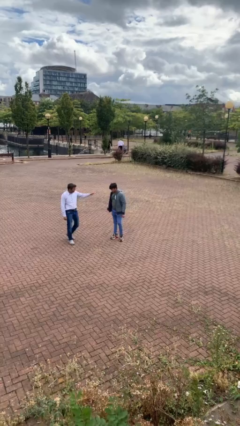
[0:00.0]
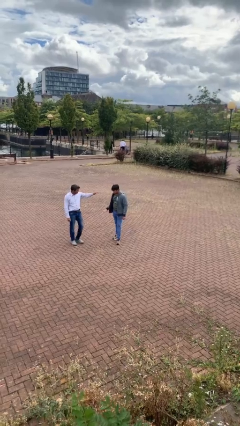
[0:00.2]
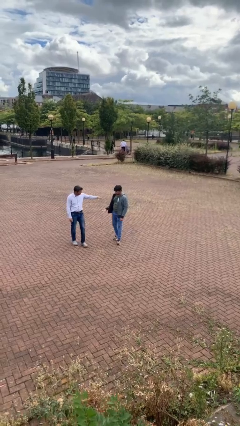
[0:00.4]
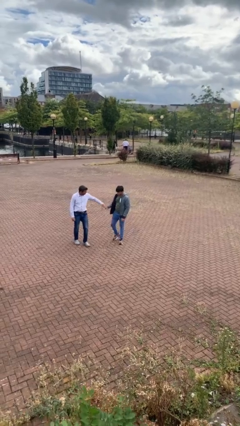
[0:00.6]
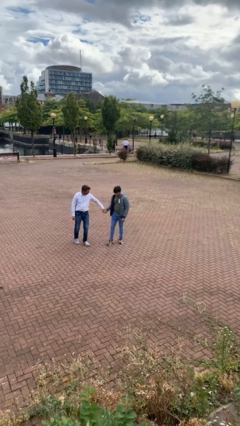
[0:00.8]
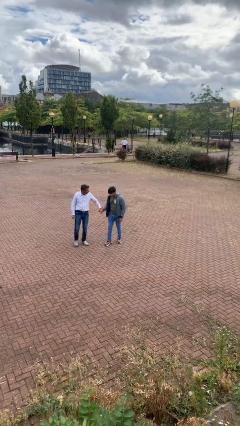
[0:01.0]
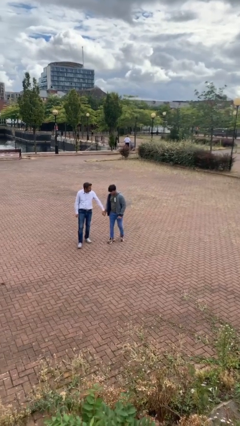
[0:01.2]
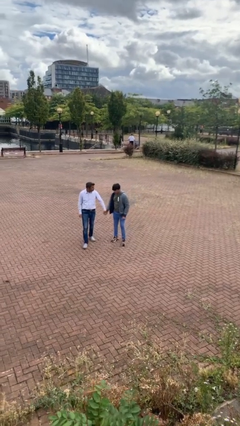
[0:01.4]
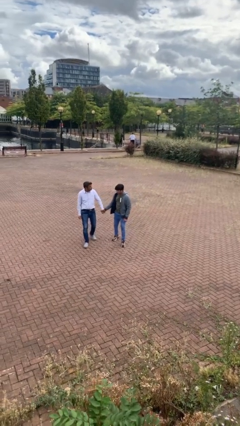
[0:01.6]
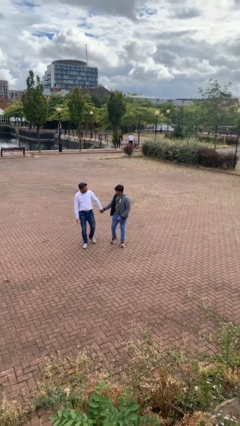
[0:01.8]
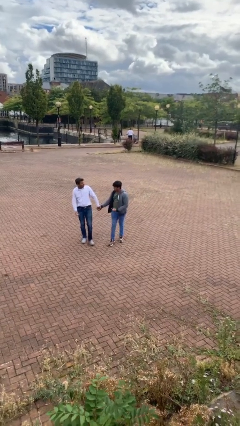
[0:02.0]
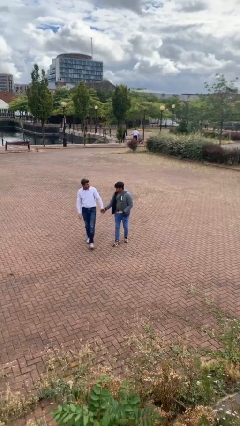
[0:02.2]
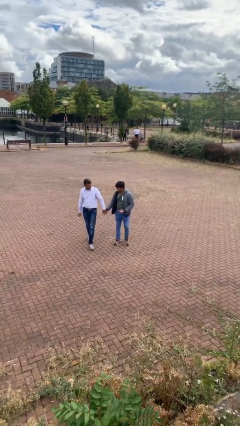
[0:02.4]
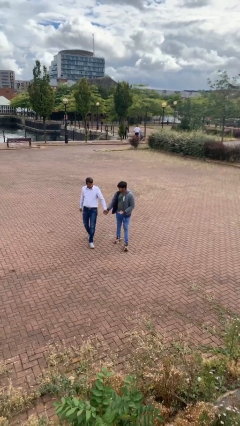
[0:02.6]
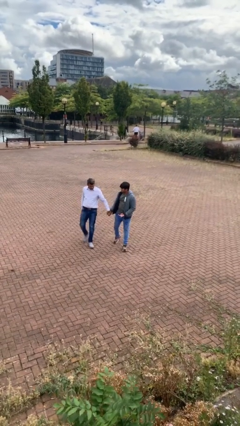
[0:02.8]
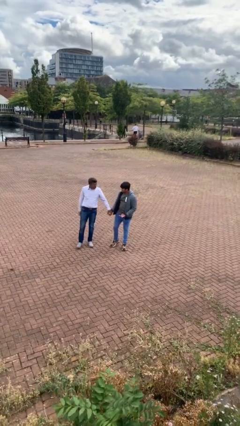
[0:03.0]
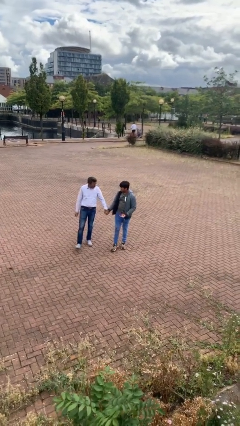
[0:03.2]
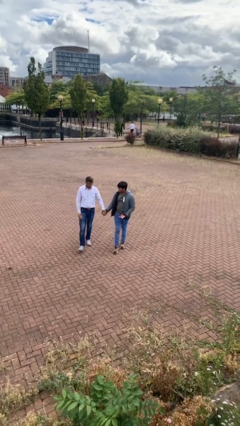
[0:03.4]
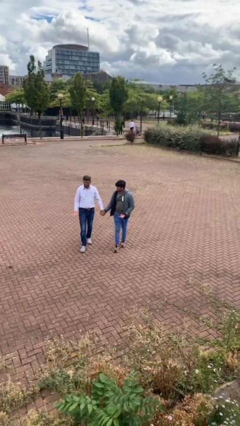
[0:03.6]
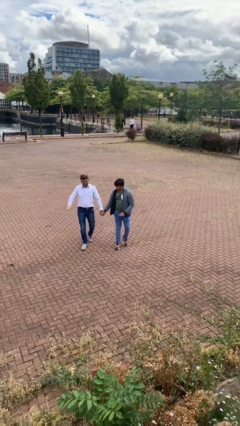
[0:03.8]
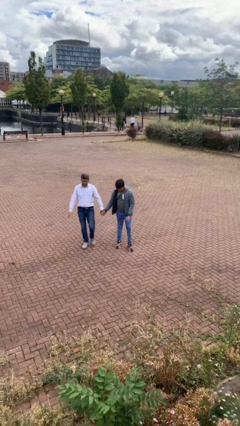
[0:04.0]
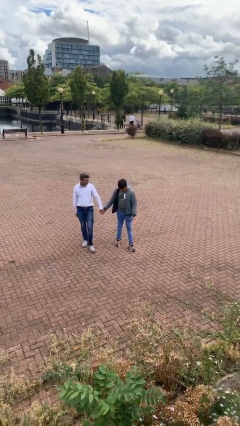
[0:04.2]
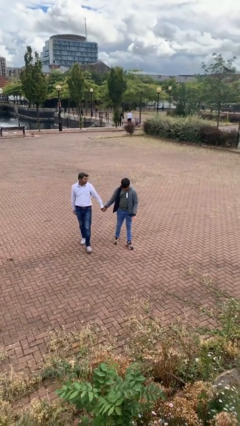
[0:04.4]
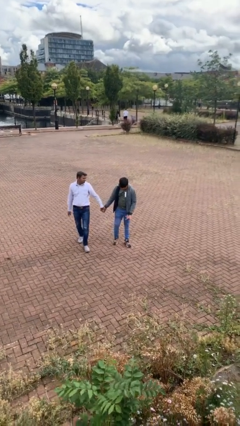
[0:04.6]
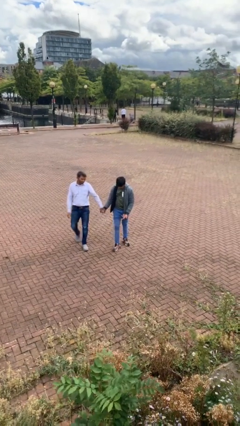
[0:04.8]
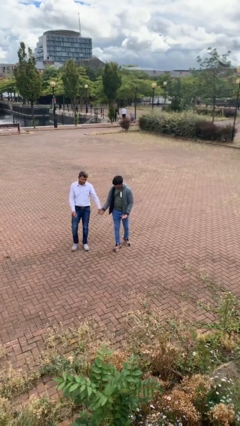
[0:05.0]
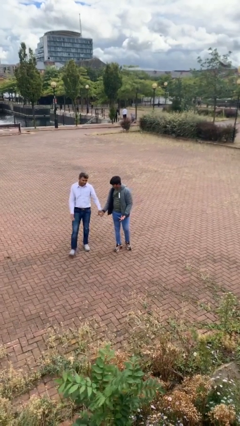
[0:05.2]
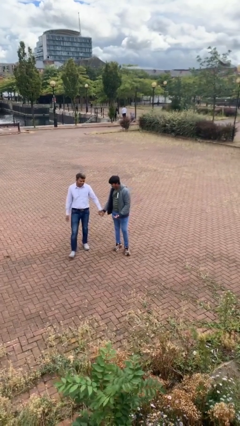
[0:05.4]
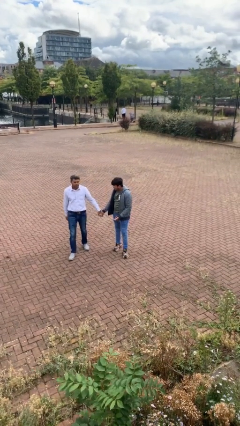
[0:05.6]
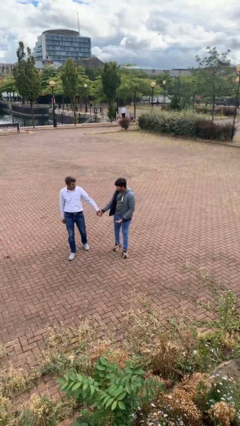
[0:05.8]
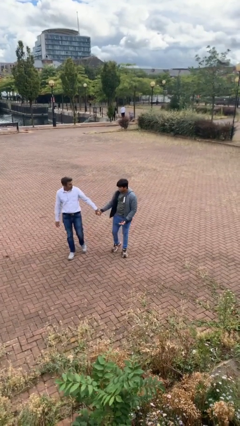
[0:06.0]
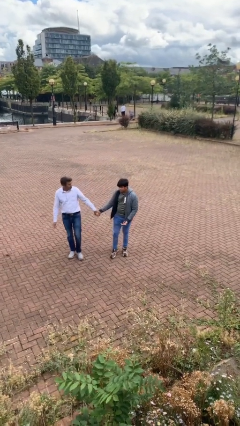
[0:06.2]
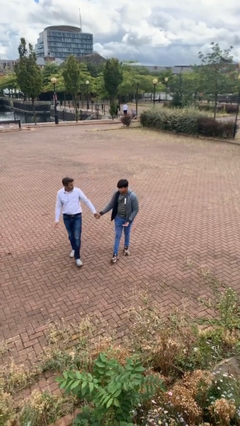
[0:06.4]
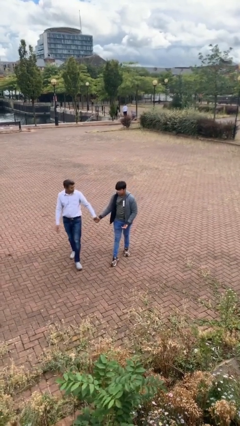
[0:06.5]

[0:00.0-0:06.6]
person holds hand

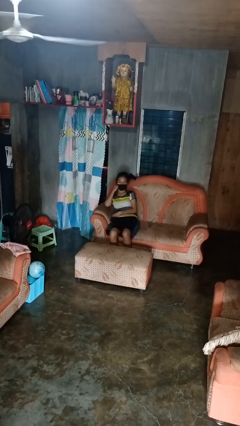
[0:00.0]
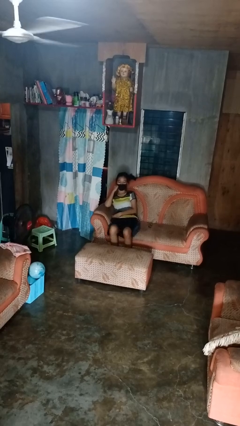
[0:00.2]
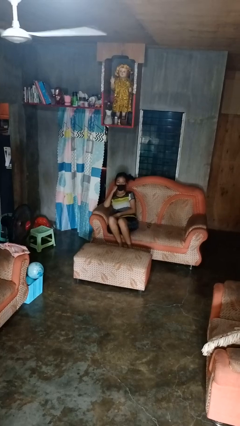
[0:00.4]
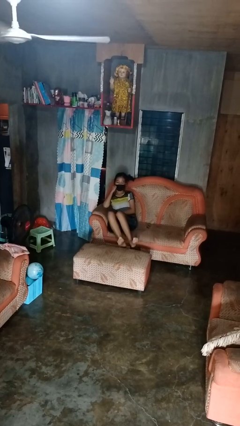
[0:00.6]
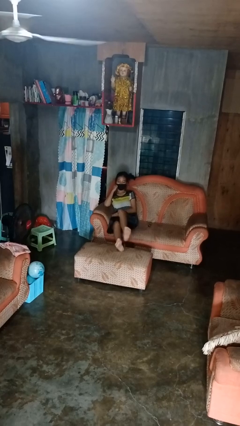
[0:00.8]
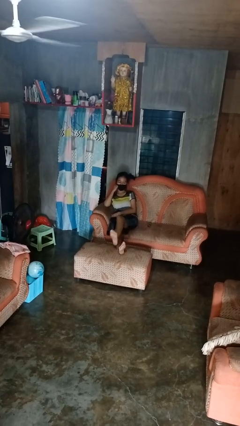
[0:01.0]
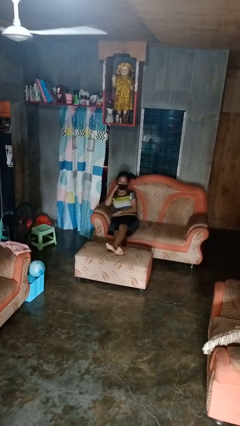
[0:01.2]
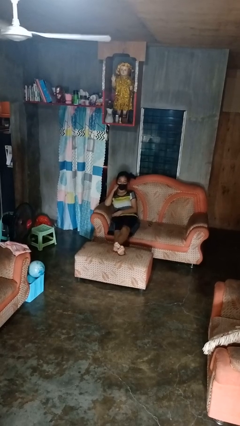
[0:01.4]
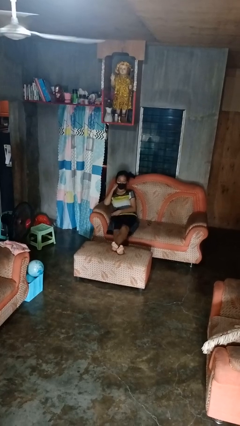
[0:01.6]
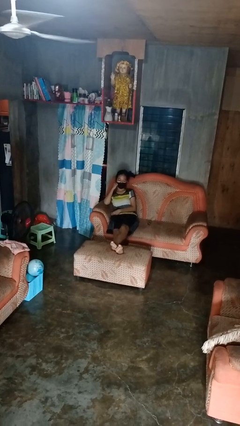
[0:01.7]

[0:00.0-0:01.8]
person puts feet up

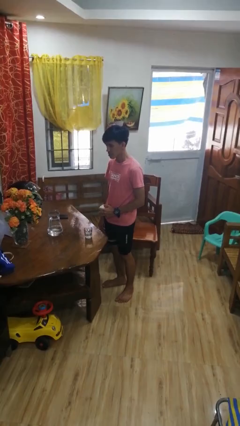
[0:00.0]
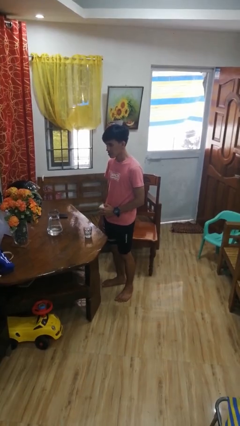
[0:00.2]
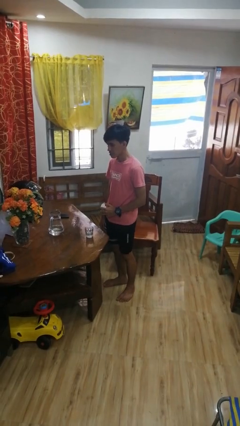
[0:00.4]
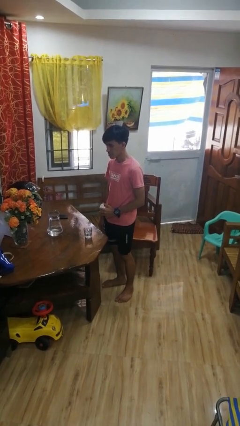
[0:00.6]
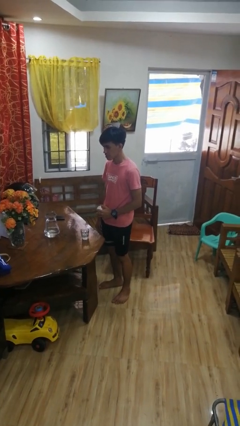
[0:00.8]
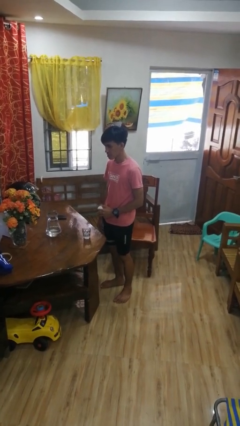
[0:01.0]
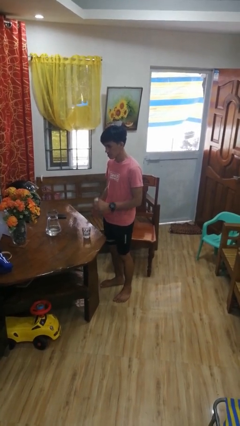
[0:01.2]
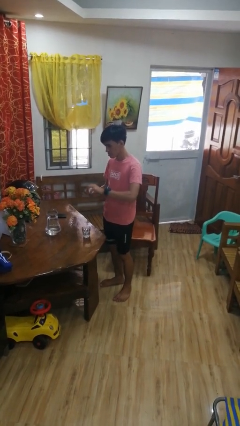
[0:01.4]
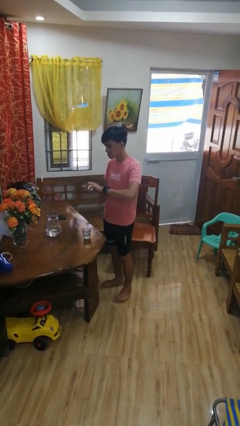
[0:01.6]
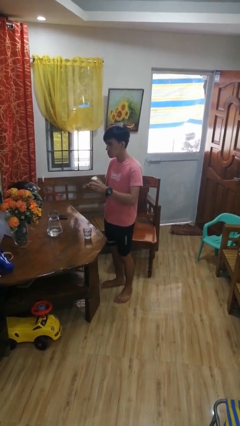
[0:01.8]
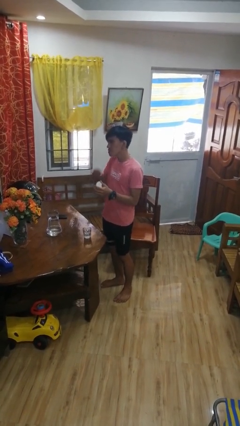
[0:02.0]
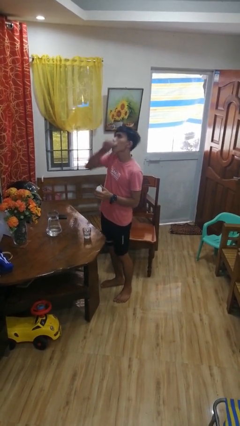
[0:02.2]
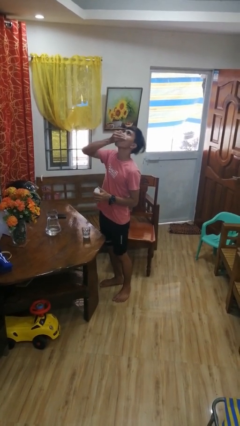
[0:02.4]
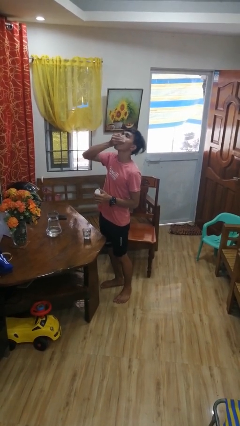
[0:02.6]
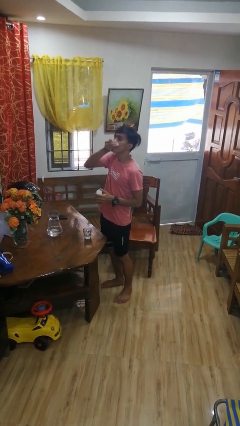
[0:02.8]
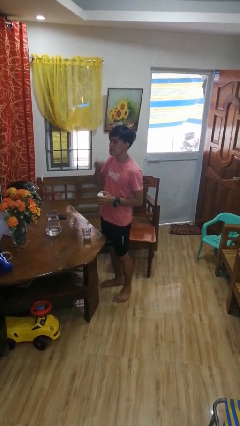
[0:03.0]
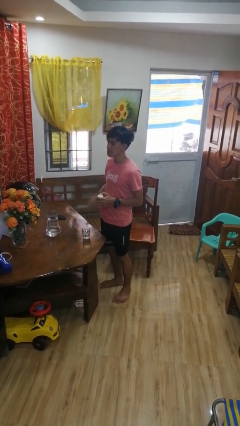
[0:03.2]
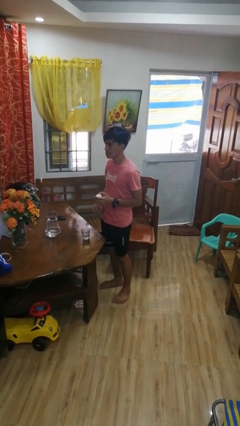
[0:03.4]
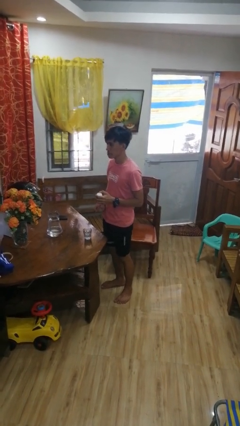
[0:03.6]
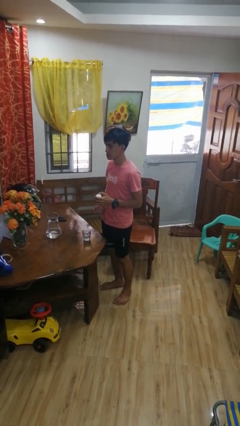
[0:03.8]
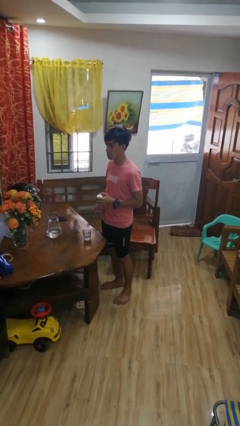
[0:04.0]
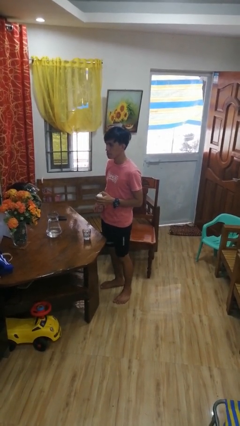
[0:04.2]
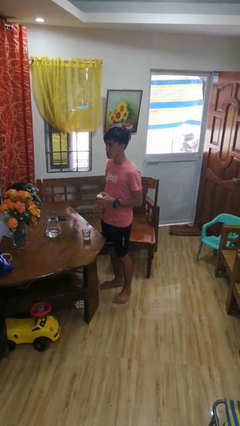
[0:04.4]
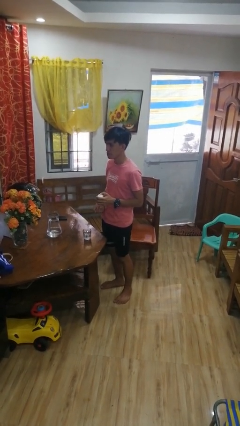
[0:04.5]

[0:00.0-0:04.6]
person takes medicine pills

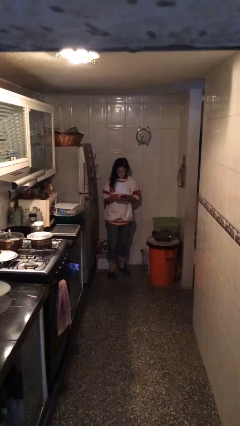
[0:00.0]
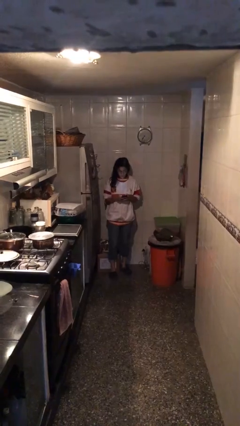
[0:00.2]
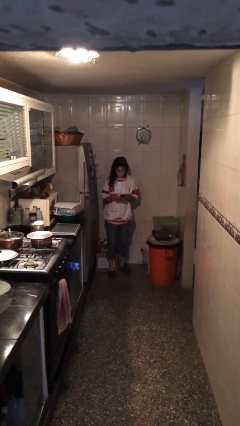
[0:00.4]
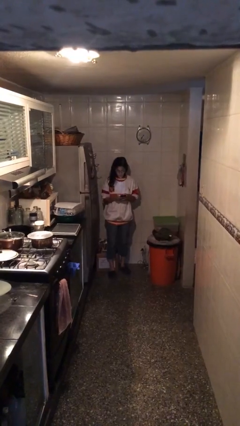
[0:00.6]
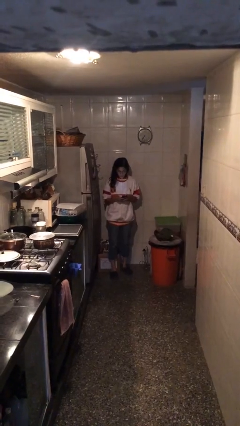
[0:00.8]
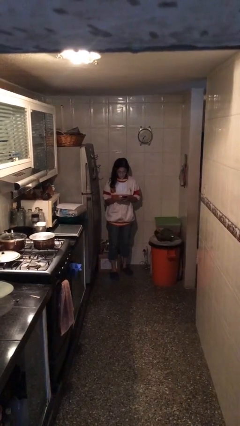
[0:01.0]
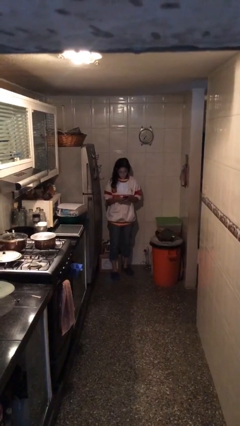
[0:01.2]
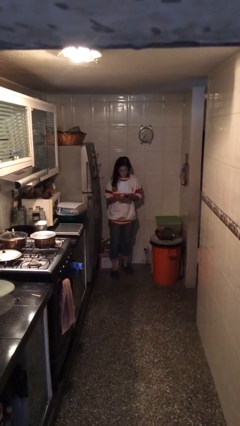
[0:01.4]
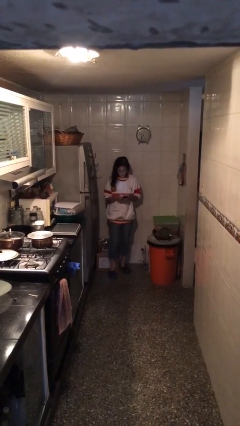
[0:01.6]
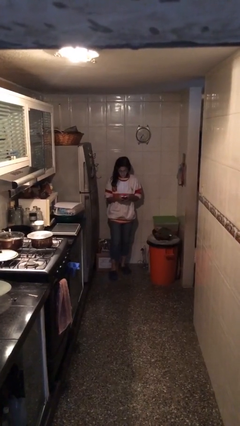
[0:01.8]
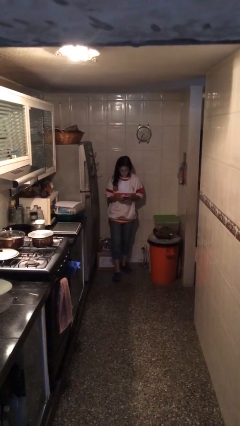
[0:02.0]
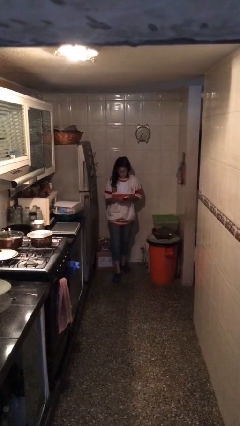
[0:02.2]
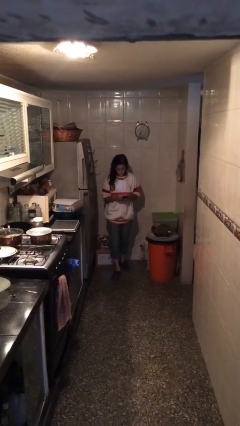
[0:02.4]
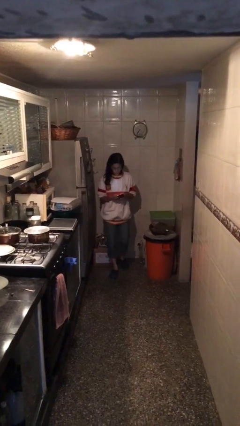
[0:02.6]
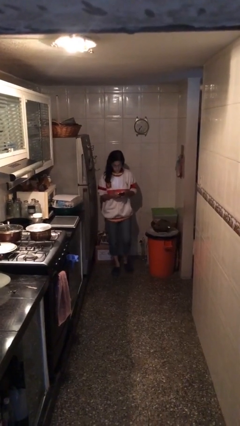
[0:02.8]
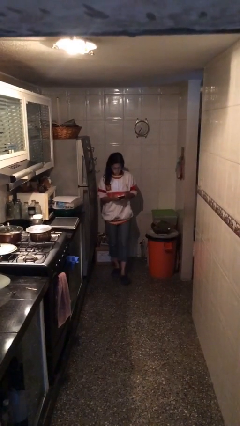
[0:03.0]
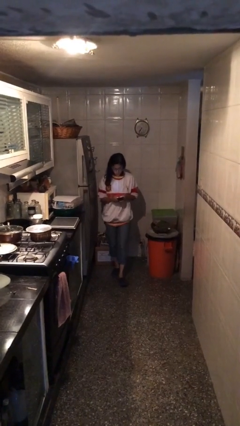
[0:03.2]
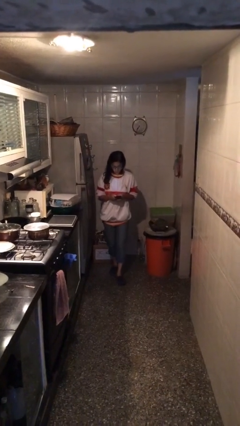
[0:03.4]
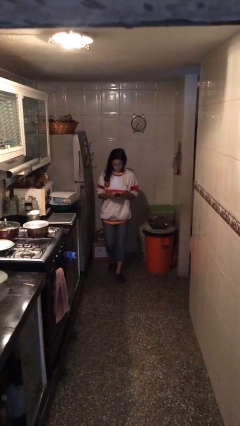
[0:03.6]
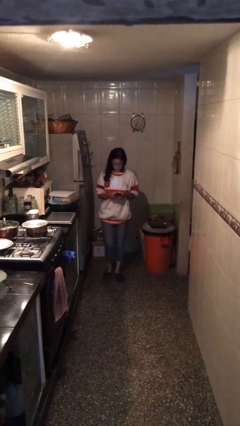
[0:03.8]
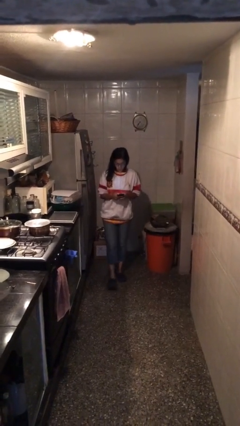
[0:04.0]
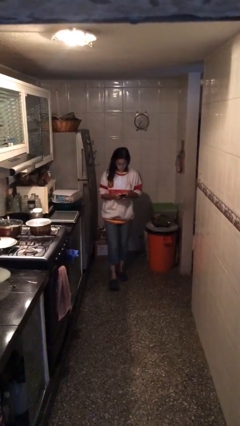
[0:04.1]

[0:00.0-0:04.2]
person texts on phone

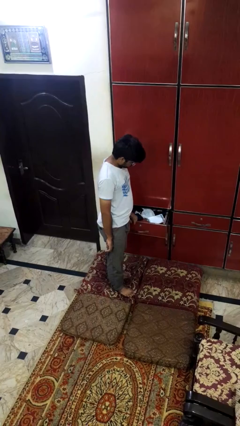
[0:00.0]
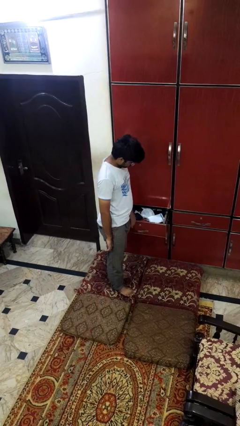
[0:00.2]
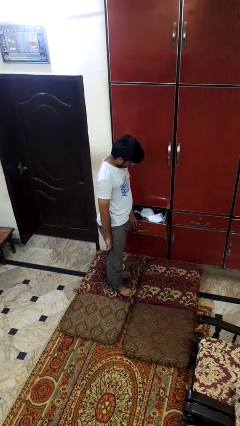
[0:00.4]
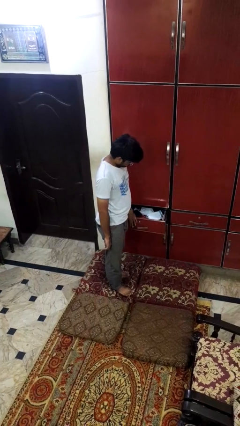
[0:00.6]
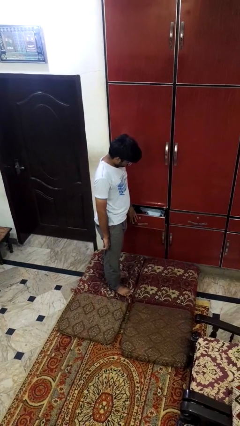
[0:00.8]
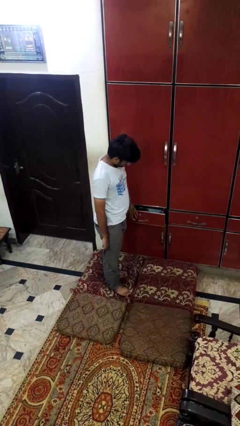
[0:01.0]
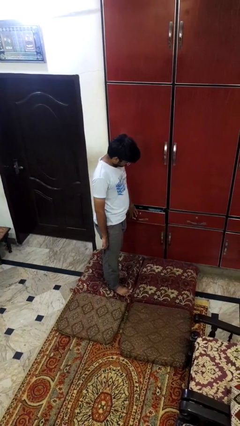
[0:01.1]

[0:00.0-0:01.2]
person closes dresser drawer
